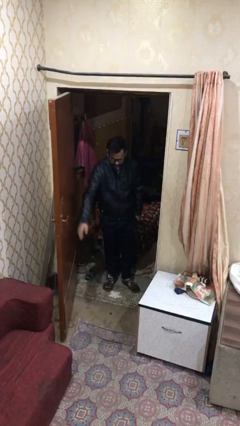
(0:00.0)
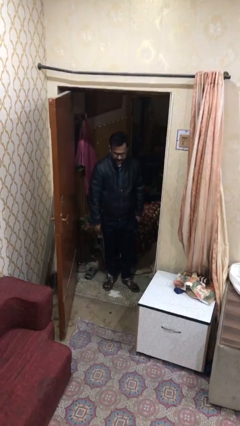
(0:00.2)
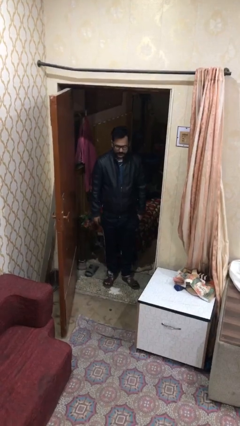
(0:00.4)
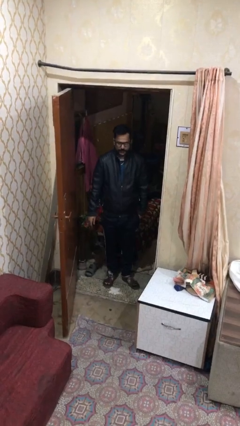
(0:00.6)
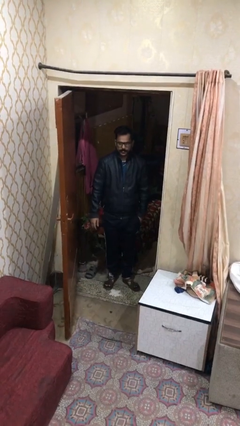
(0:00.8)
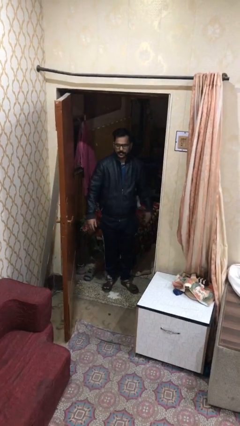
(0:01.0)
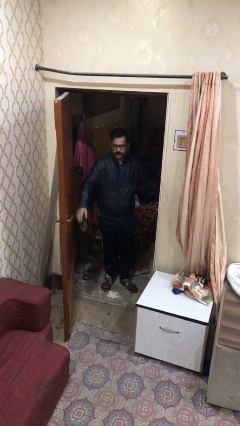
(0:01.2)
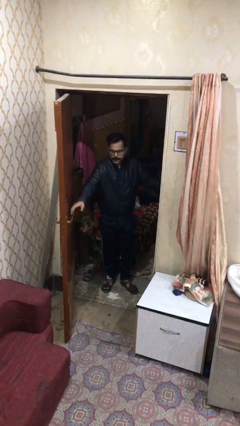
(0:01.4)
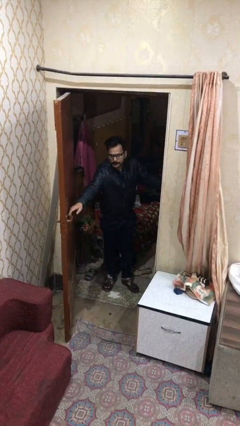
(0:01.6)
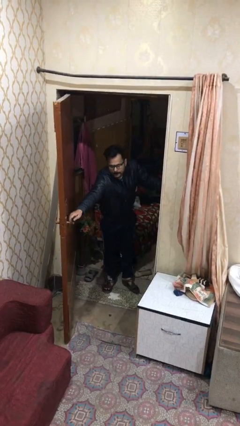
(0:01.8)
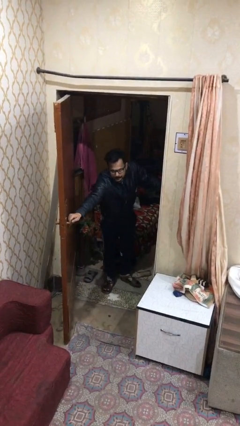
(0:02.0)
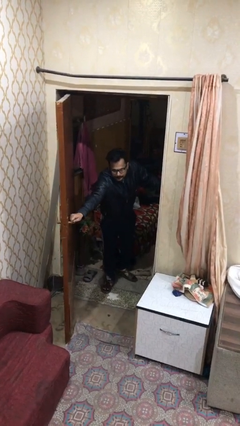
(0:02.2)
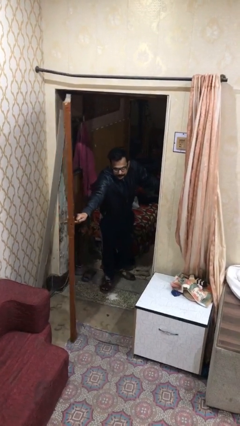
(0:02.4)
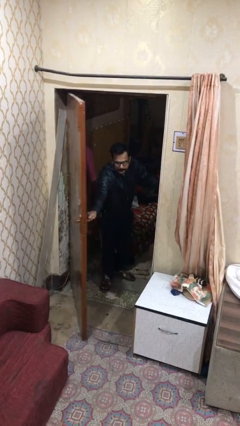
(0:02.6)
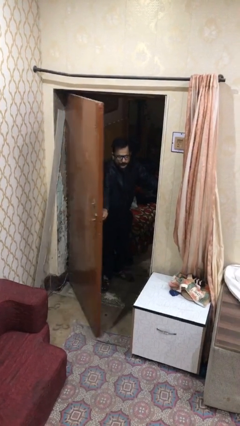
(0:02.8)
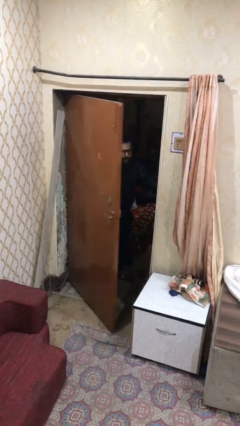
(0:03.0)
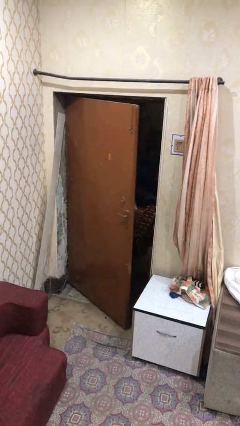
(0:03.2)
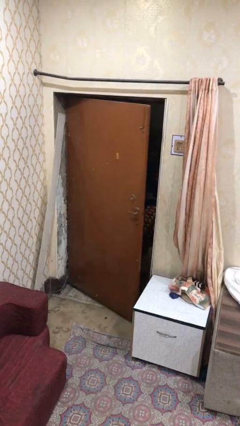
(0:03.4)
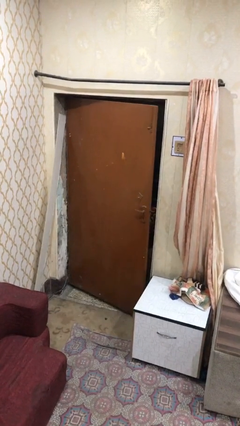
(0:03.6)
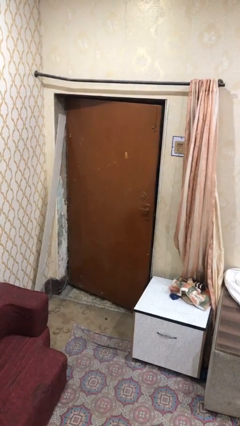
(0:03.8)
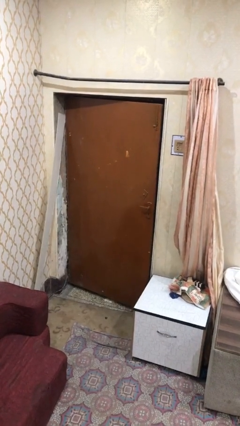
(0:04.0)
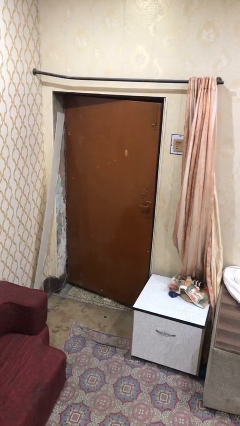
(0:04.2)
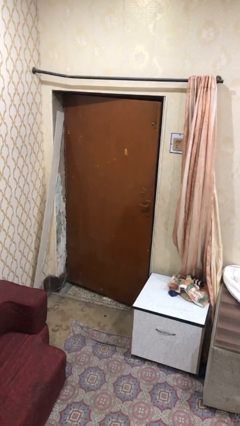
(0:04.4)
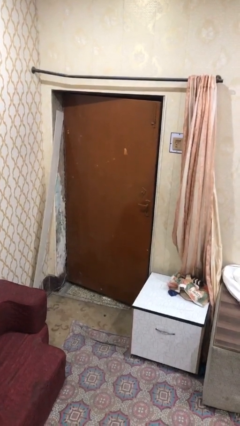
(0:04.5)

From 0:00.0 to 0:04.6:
person closes facility door

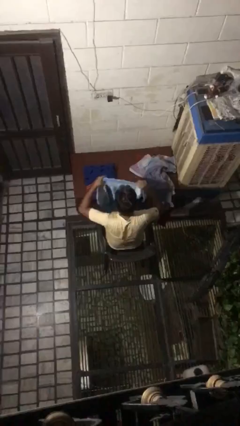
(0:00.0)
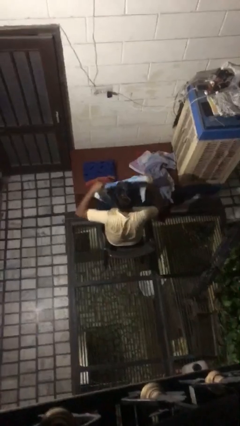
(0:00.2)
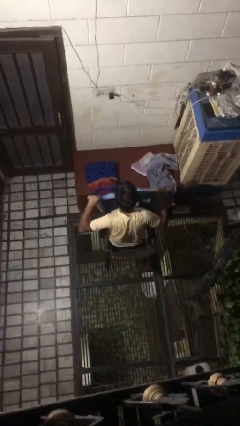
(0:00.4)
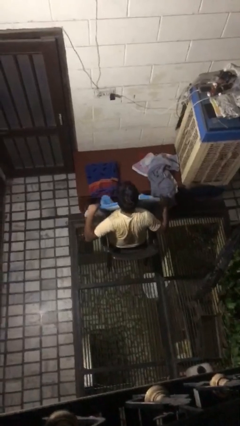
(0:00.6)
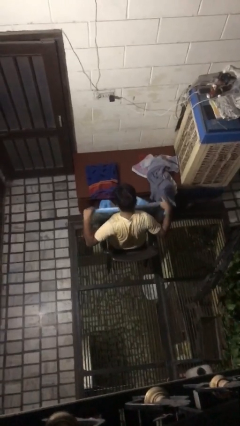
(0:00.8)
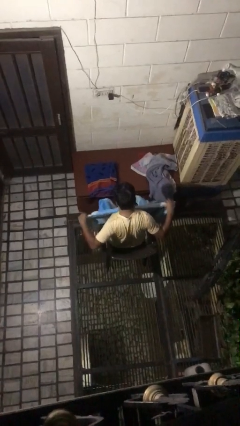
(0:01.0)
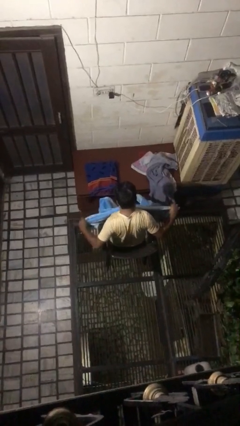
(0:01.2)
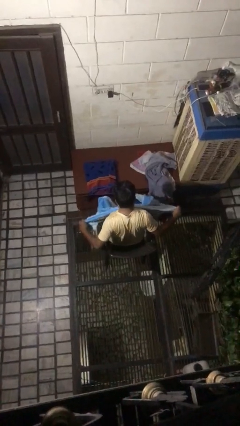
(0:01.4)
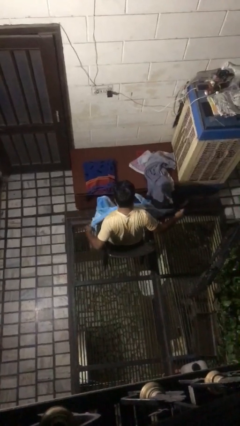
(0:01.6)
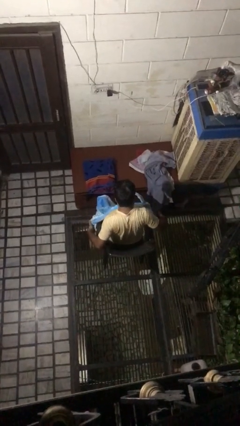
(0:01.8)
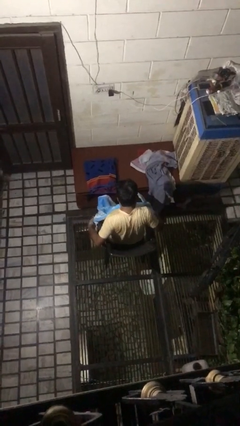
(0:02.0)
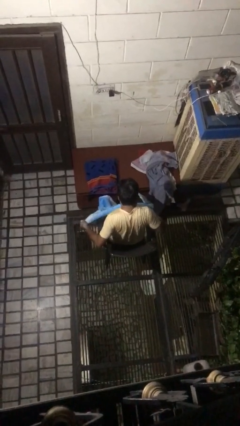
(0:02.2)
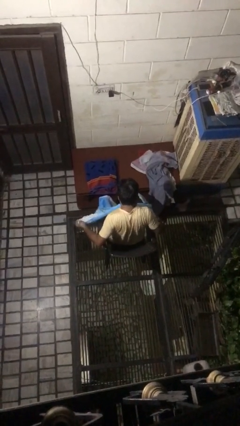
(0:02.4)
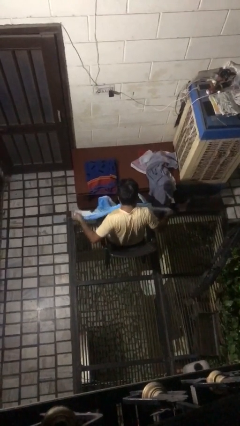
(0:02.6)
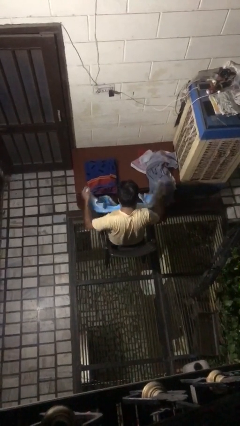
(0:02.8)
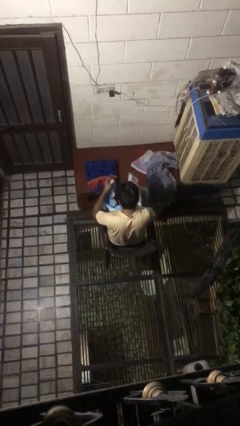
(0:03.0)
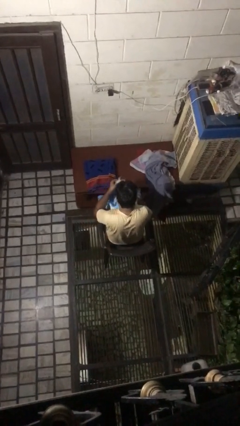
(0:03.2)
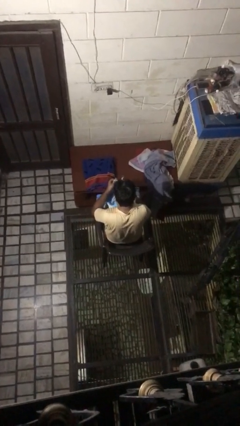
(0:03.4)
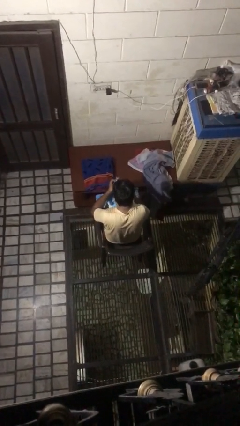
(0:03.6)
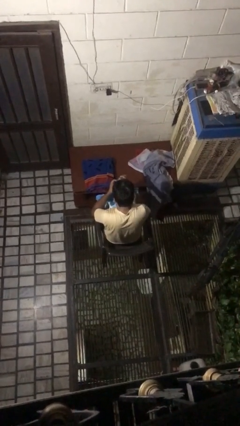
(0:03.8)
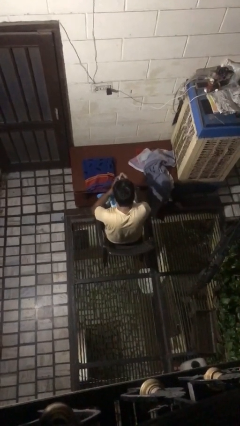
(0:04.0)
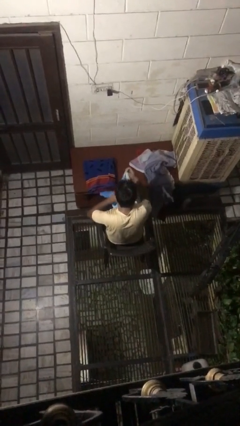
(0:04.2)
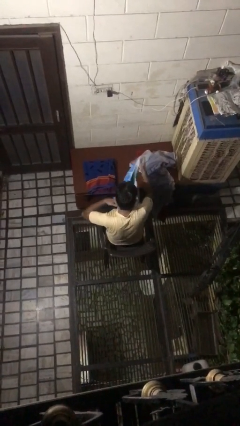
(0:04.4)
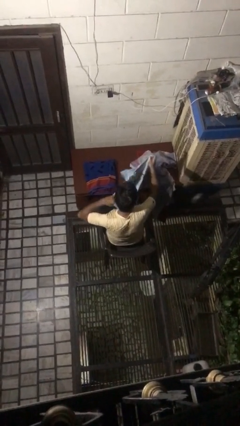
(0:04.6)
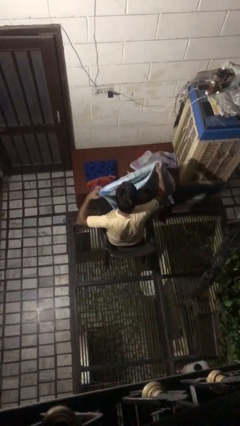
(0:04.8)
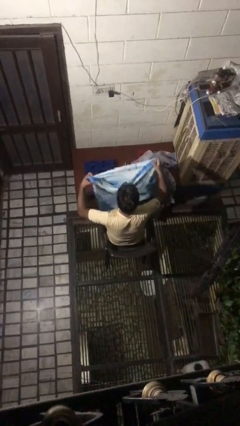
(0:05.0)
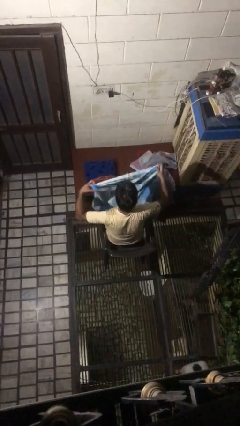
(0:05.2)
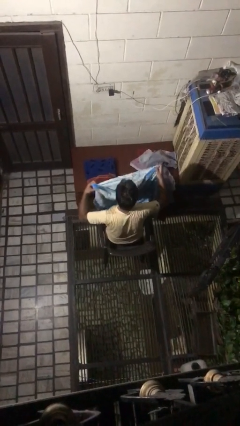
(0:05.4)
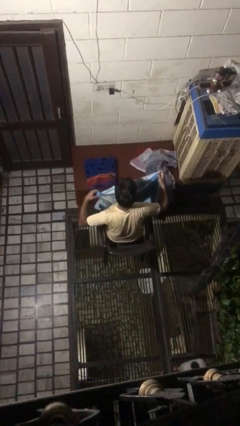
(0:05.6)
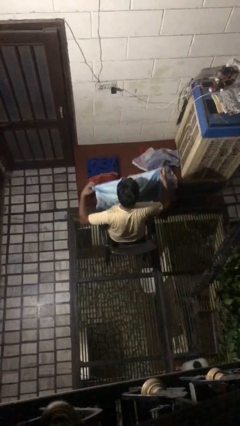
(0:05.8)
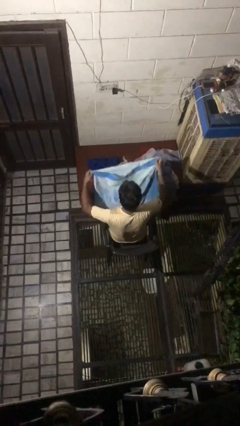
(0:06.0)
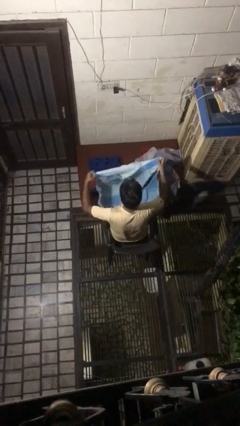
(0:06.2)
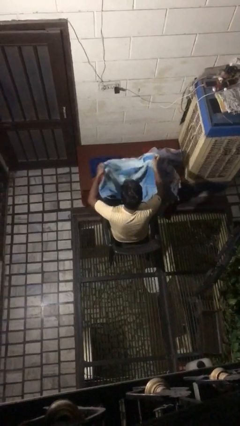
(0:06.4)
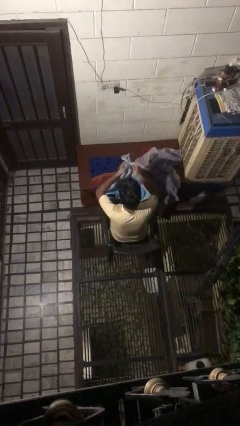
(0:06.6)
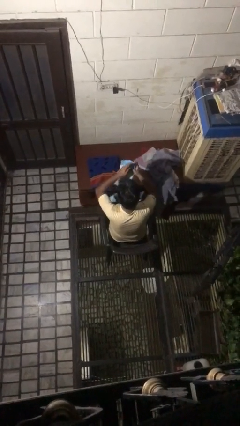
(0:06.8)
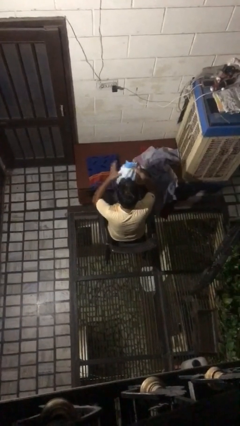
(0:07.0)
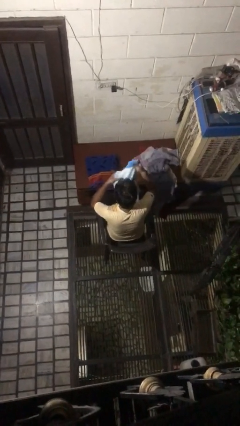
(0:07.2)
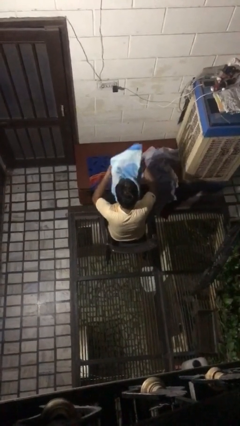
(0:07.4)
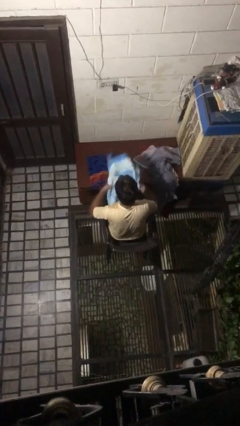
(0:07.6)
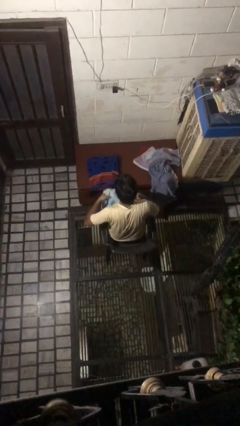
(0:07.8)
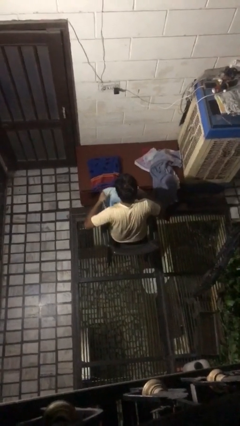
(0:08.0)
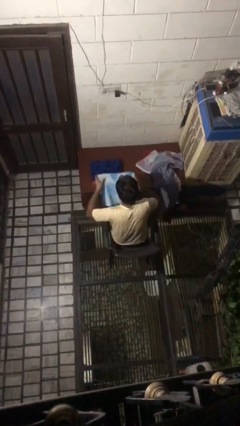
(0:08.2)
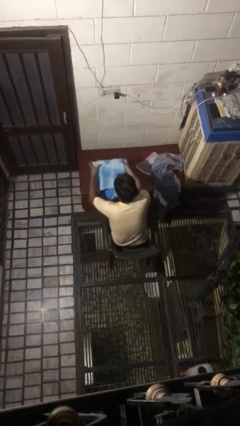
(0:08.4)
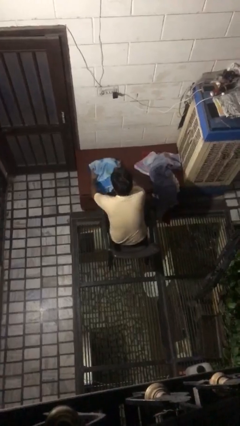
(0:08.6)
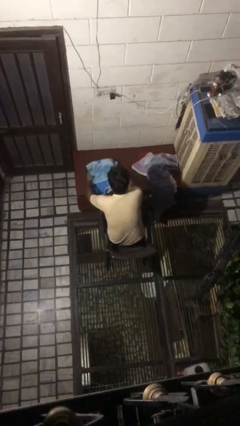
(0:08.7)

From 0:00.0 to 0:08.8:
person folds towel

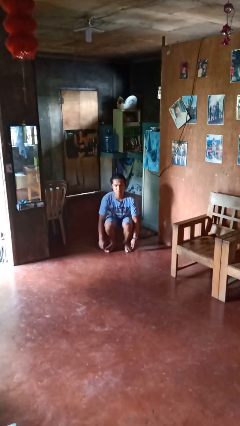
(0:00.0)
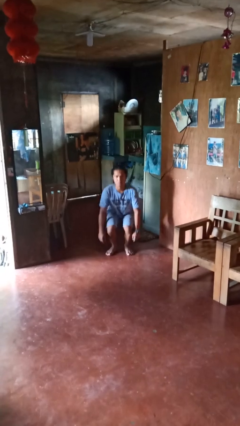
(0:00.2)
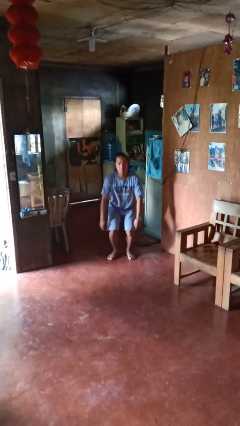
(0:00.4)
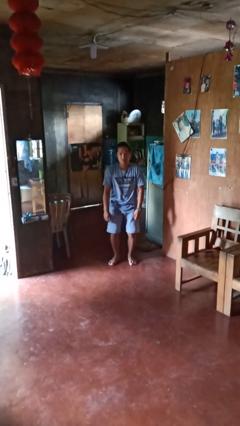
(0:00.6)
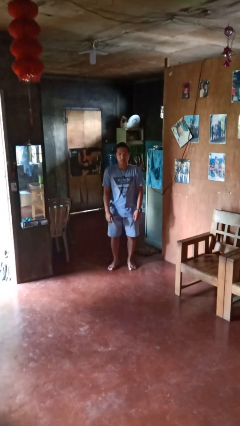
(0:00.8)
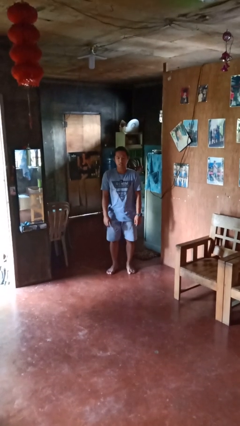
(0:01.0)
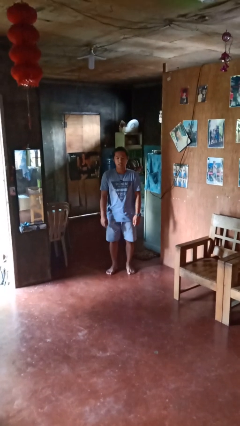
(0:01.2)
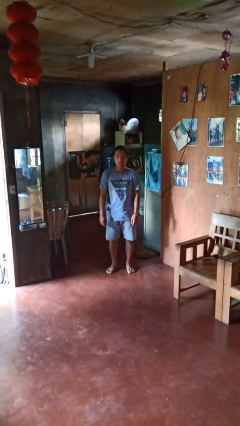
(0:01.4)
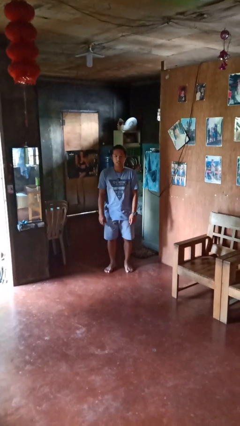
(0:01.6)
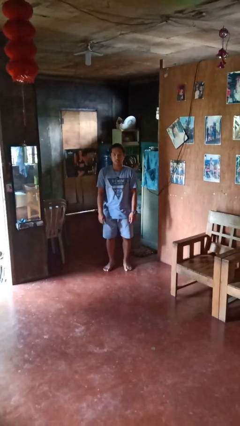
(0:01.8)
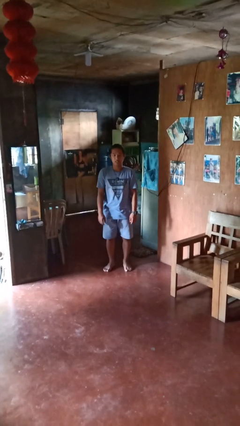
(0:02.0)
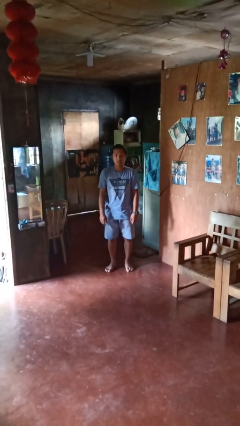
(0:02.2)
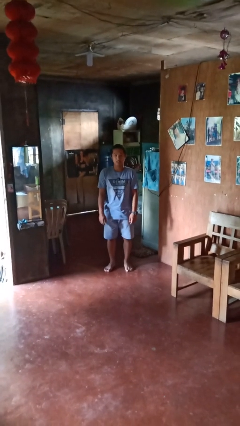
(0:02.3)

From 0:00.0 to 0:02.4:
person stands up

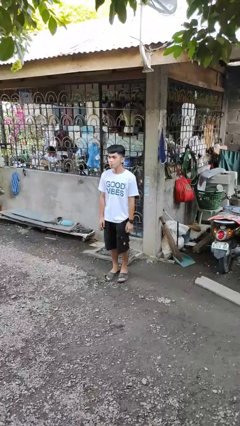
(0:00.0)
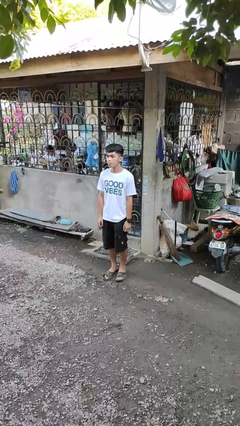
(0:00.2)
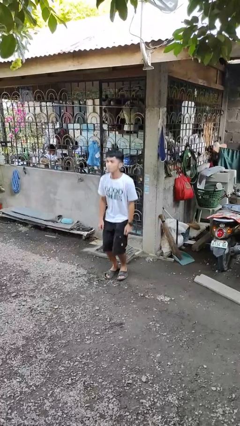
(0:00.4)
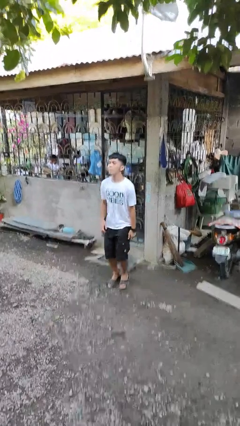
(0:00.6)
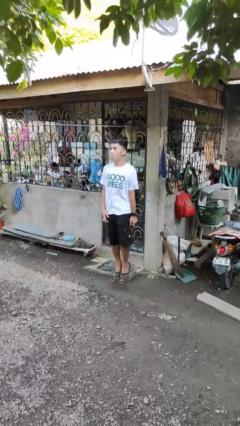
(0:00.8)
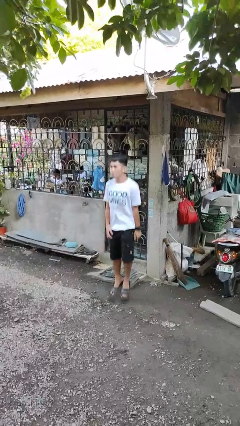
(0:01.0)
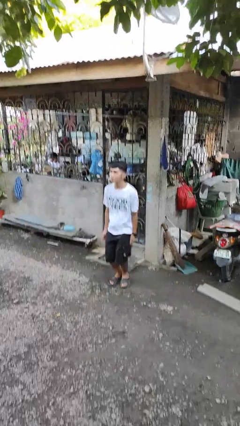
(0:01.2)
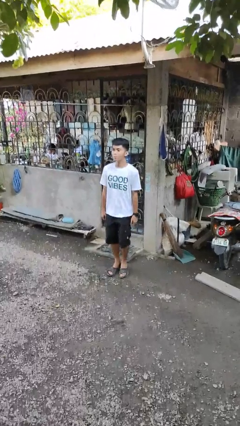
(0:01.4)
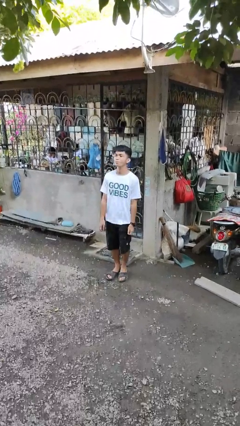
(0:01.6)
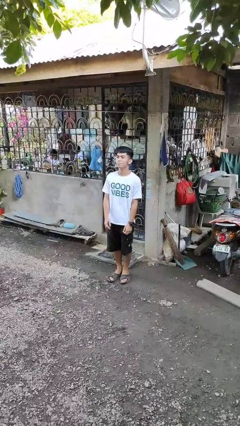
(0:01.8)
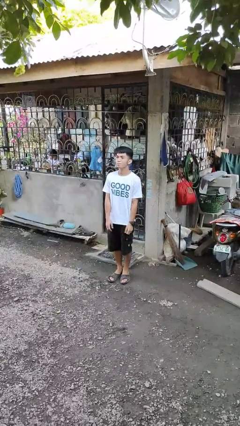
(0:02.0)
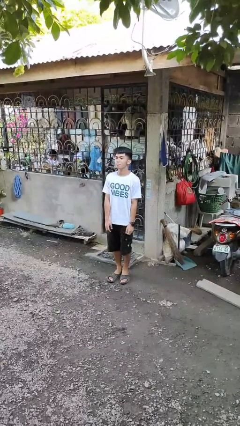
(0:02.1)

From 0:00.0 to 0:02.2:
person jumps

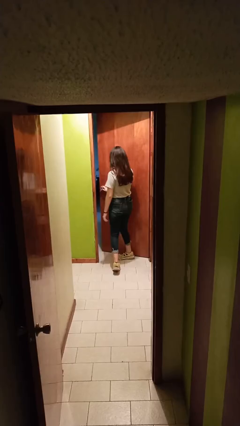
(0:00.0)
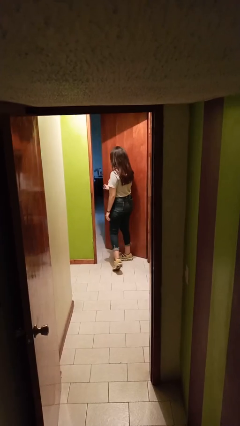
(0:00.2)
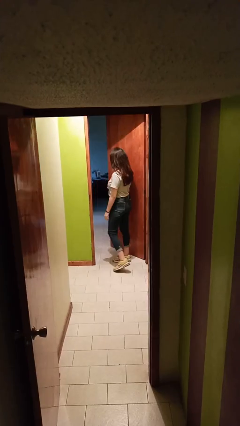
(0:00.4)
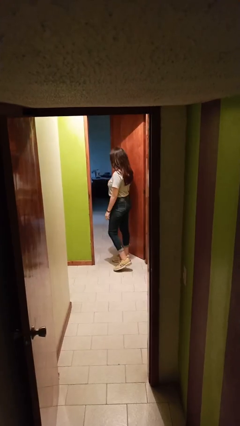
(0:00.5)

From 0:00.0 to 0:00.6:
person opens facility door
